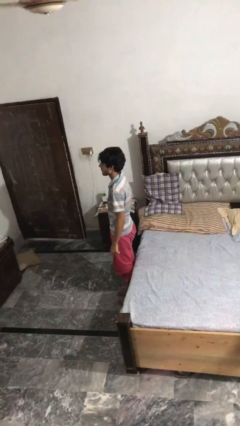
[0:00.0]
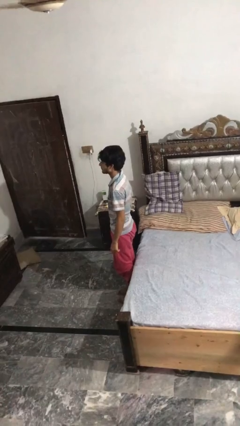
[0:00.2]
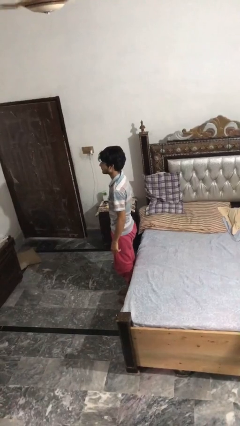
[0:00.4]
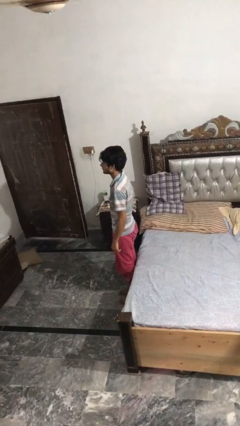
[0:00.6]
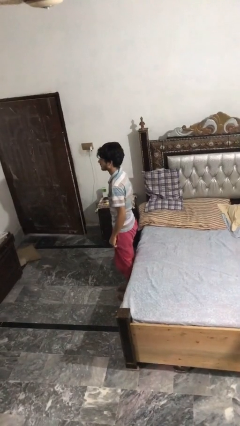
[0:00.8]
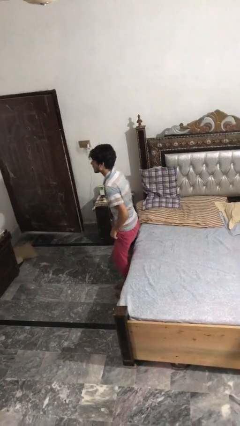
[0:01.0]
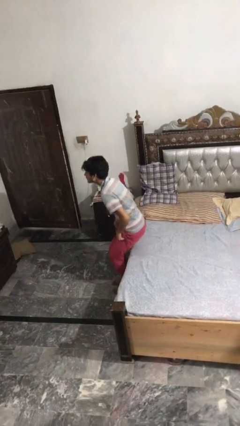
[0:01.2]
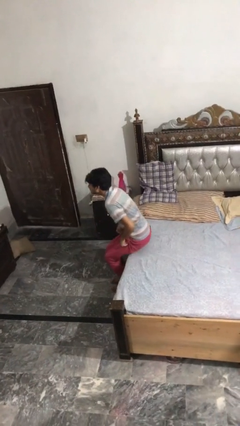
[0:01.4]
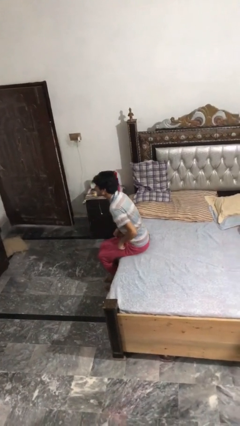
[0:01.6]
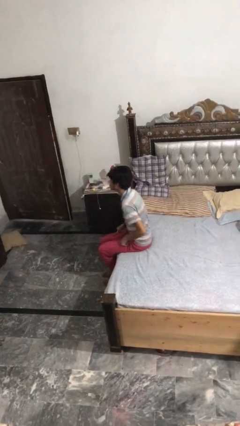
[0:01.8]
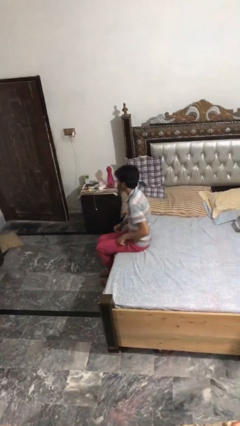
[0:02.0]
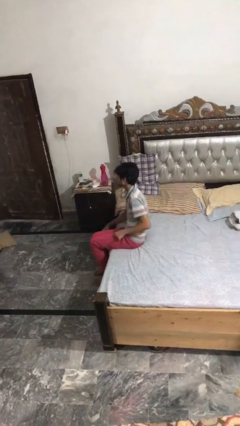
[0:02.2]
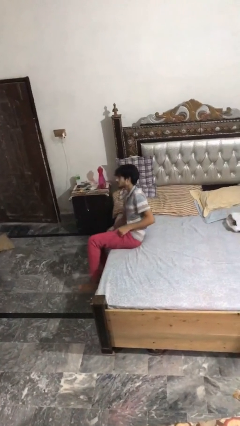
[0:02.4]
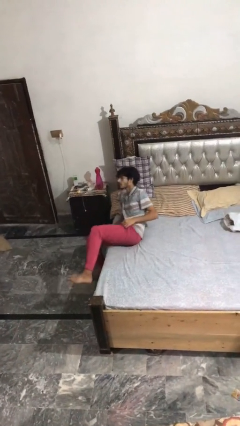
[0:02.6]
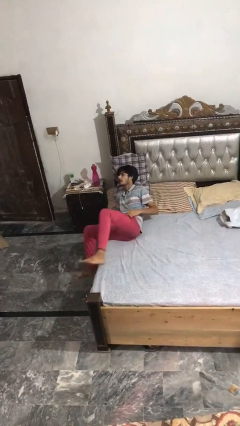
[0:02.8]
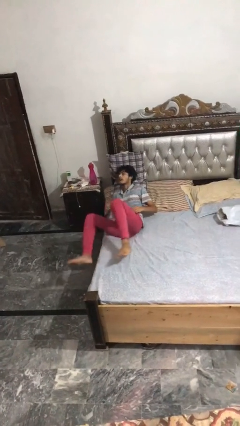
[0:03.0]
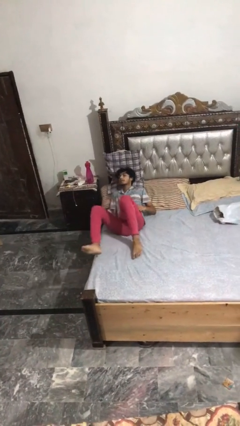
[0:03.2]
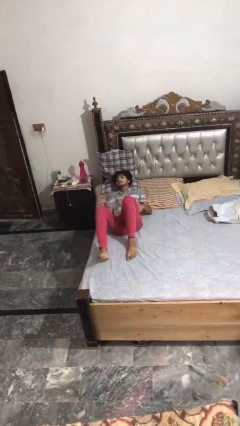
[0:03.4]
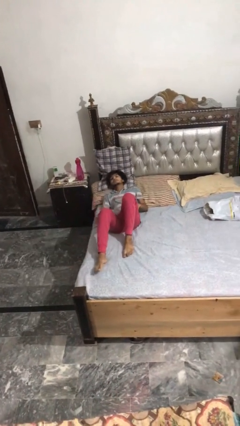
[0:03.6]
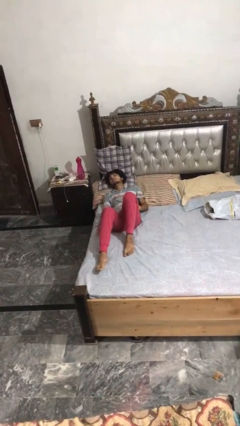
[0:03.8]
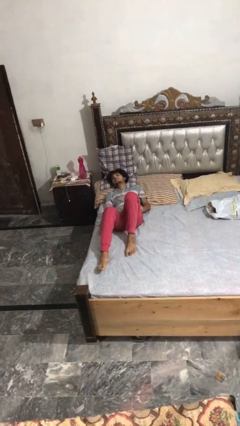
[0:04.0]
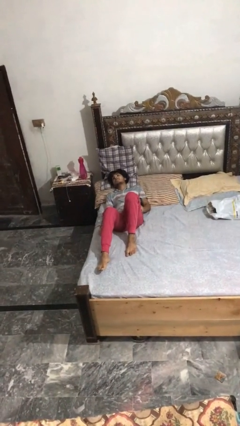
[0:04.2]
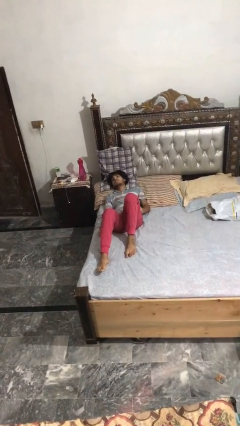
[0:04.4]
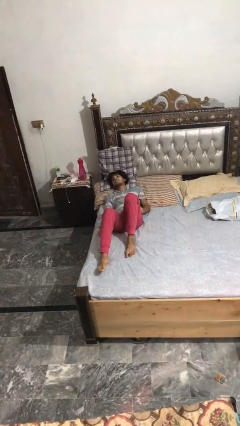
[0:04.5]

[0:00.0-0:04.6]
person lies down on bed

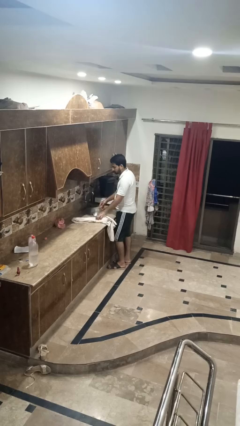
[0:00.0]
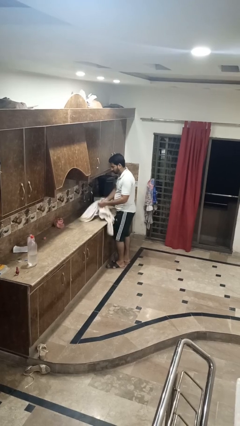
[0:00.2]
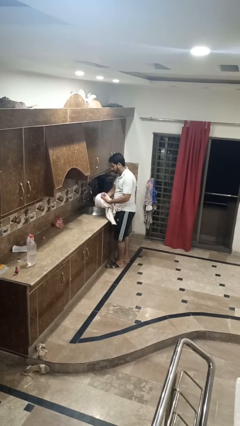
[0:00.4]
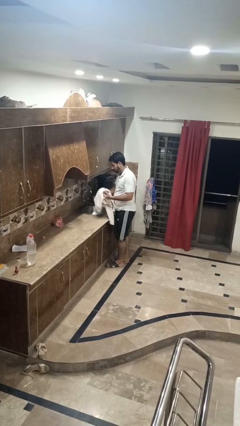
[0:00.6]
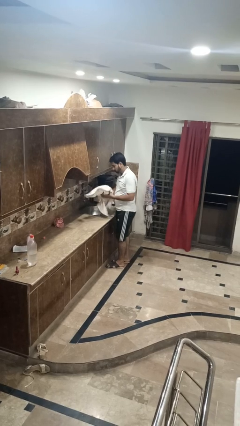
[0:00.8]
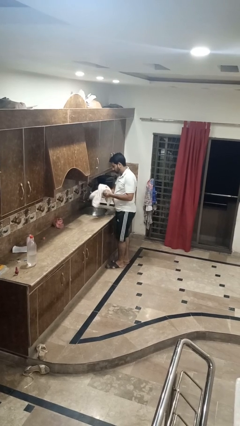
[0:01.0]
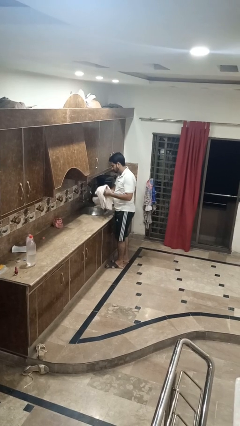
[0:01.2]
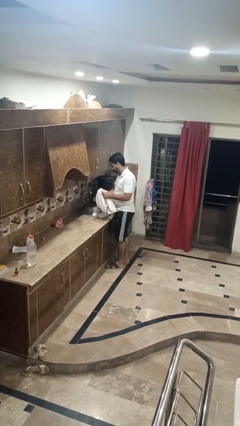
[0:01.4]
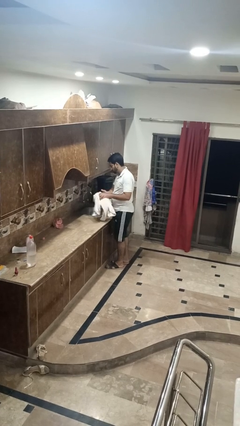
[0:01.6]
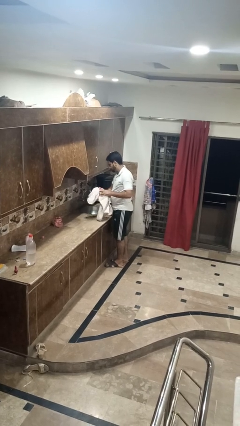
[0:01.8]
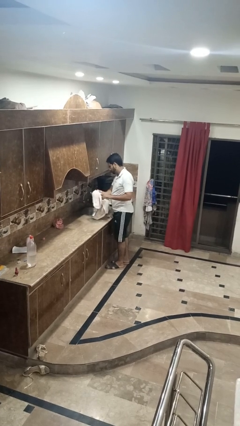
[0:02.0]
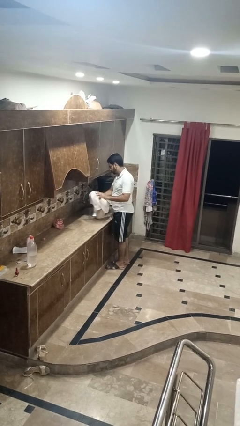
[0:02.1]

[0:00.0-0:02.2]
person dries hands with towel

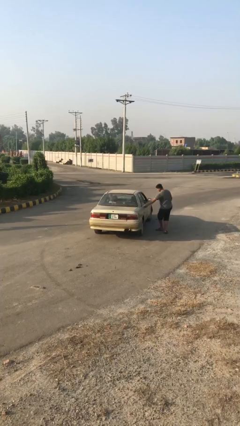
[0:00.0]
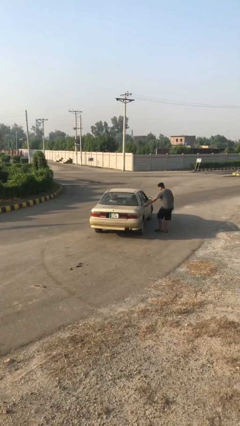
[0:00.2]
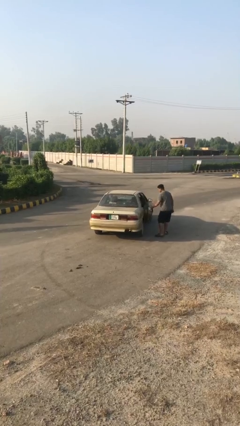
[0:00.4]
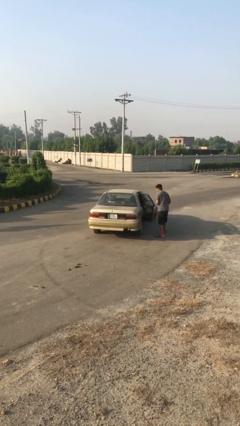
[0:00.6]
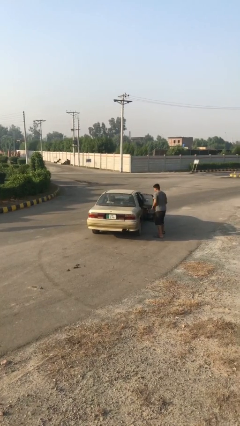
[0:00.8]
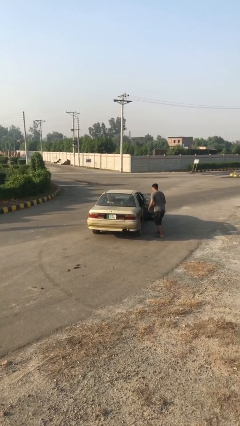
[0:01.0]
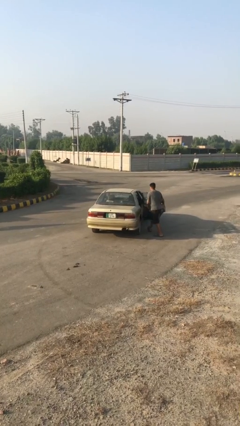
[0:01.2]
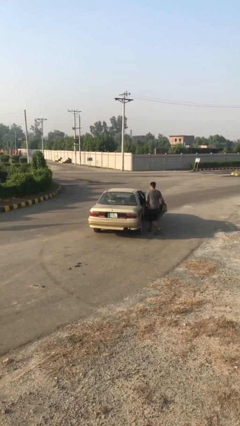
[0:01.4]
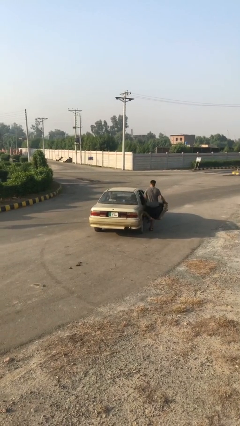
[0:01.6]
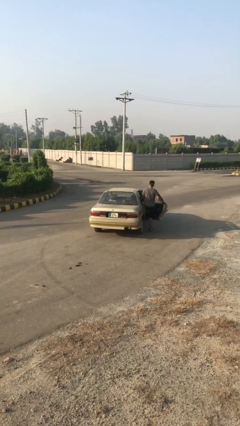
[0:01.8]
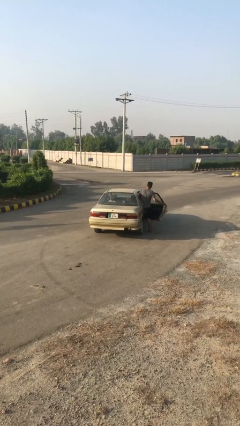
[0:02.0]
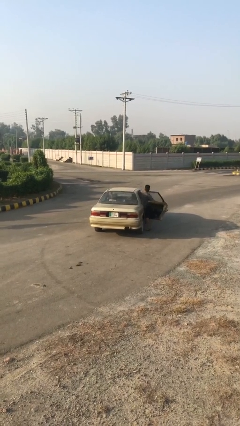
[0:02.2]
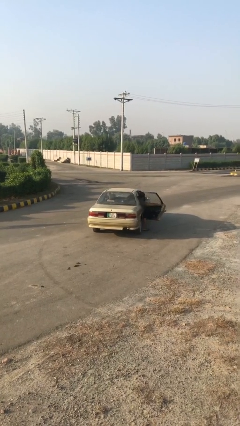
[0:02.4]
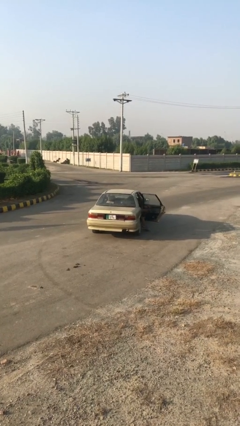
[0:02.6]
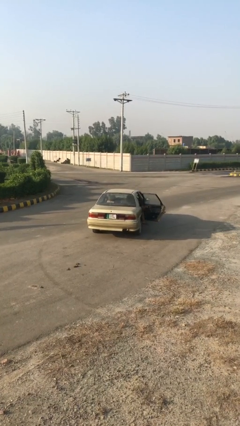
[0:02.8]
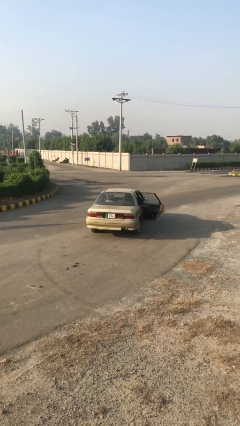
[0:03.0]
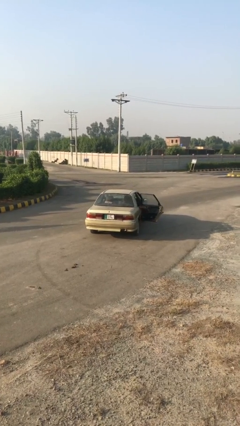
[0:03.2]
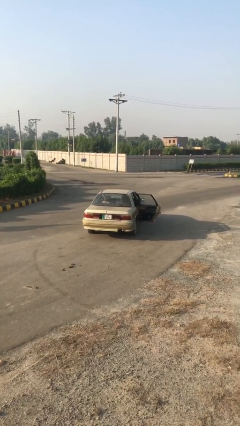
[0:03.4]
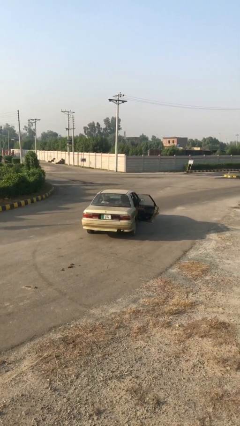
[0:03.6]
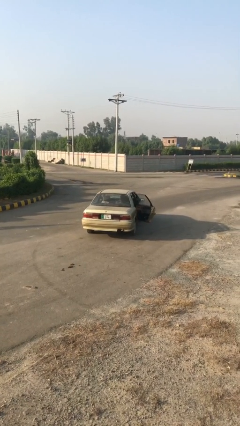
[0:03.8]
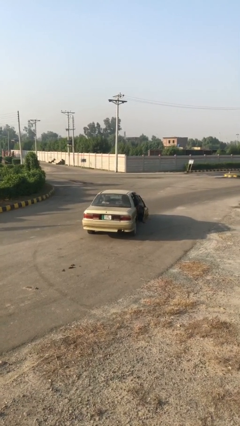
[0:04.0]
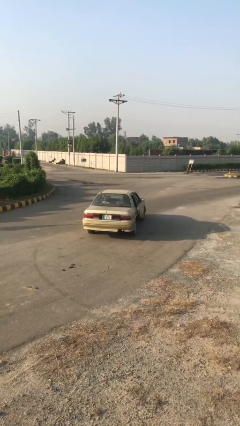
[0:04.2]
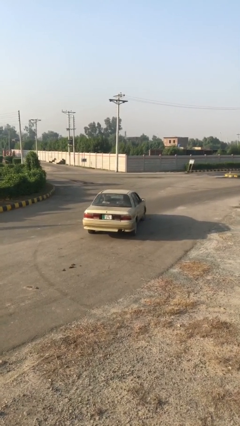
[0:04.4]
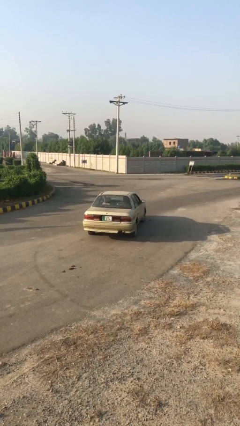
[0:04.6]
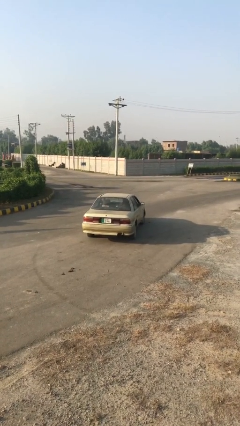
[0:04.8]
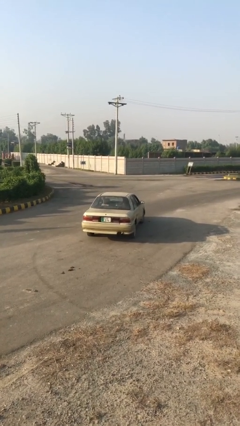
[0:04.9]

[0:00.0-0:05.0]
car picks up person

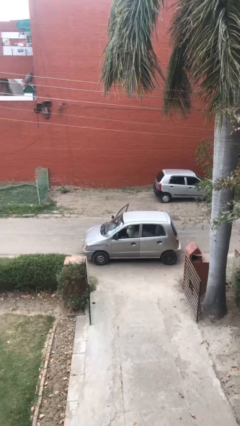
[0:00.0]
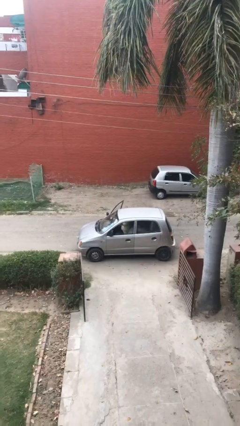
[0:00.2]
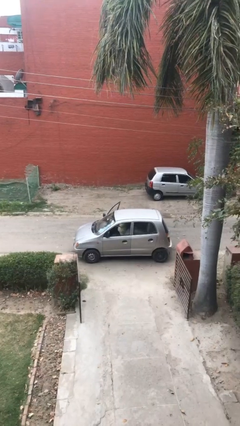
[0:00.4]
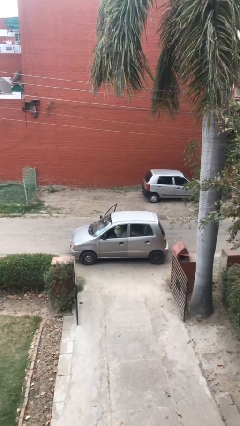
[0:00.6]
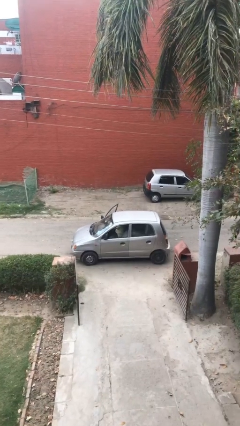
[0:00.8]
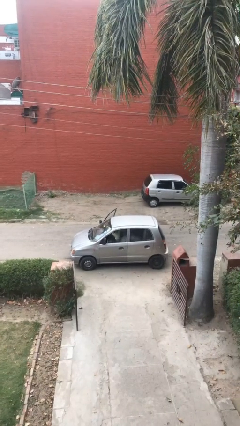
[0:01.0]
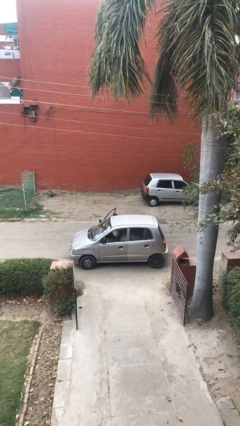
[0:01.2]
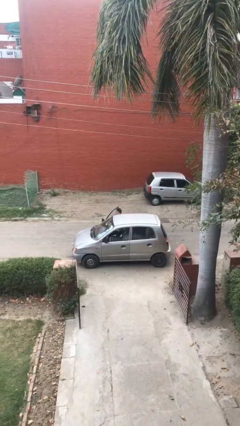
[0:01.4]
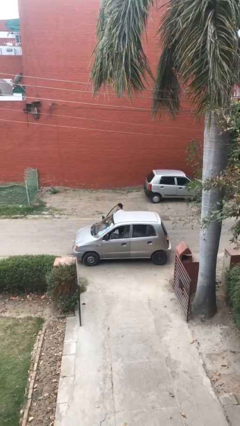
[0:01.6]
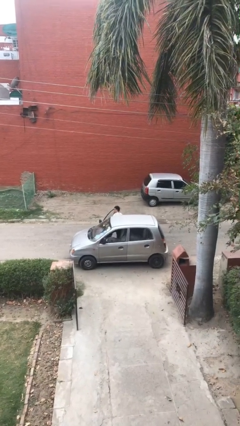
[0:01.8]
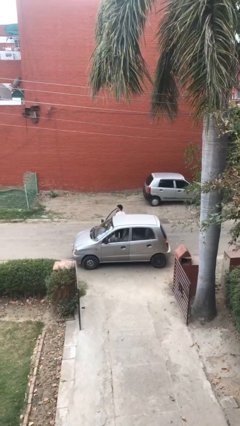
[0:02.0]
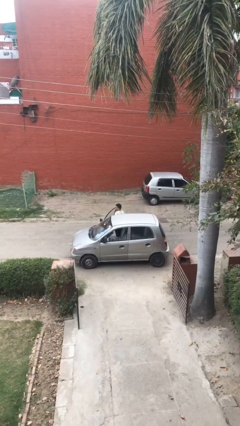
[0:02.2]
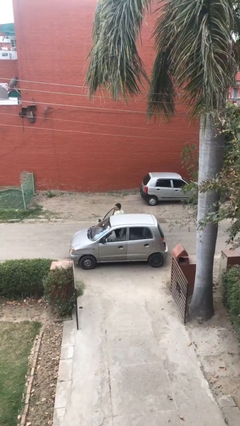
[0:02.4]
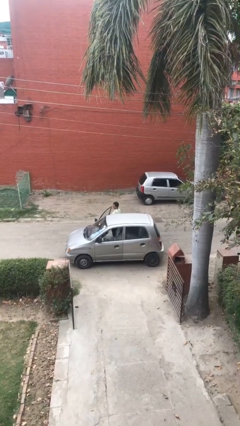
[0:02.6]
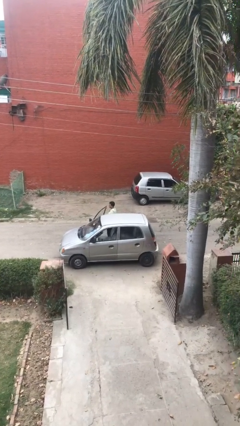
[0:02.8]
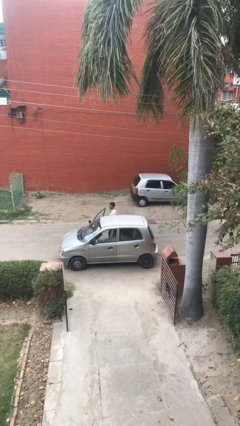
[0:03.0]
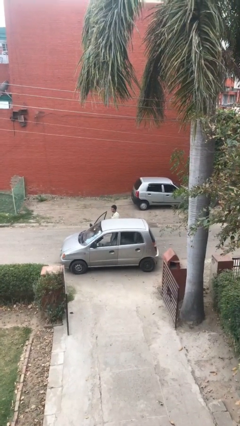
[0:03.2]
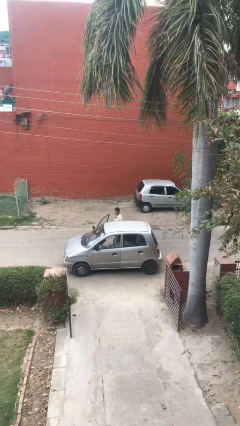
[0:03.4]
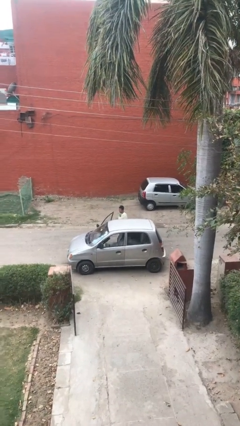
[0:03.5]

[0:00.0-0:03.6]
person exits car

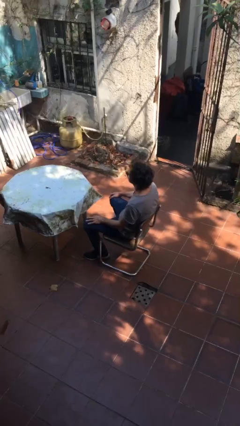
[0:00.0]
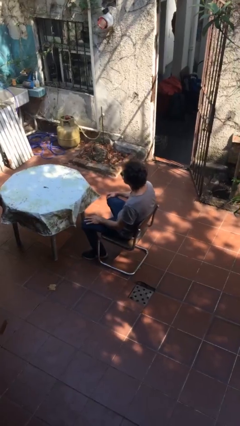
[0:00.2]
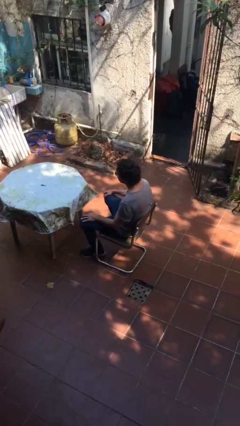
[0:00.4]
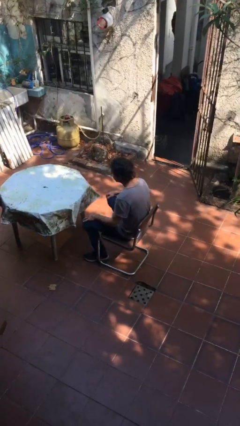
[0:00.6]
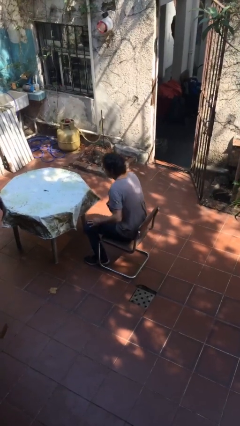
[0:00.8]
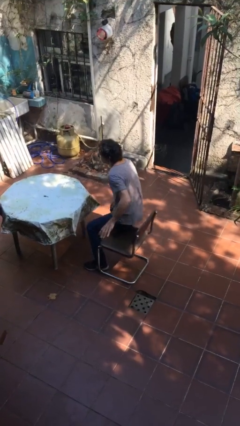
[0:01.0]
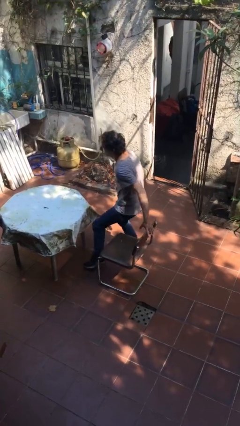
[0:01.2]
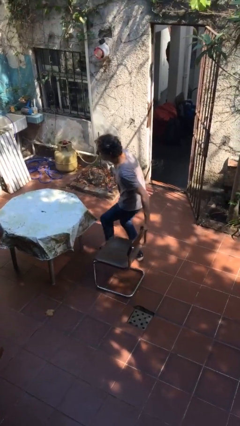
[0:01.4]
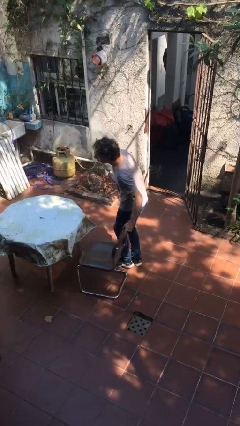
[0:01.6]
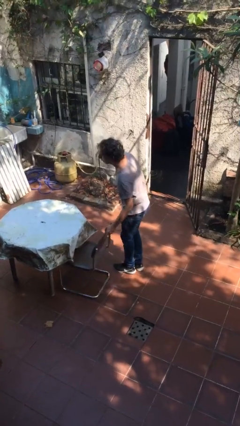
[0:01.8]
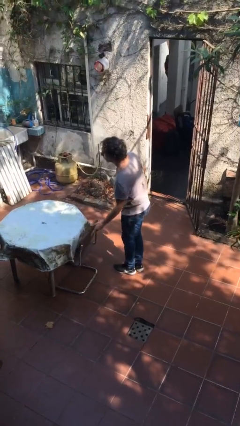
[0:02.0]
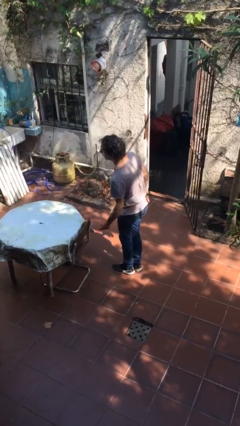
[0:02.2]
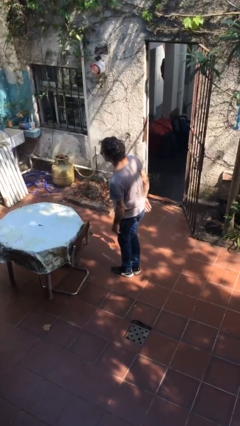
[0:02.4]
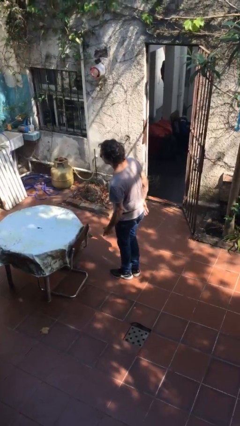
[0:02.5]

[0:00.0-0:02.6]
person stands up
